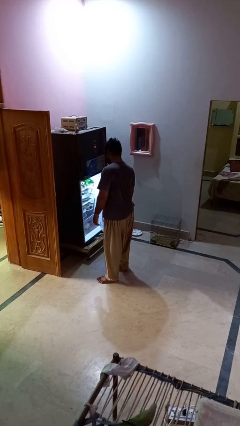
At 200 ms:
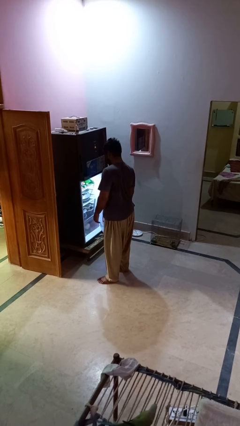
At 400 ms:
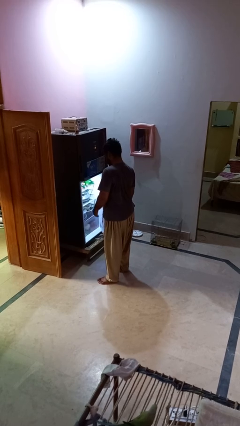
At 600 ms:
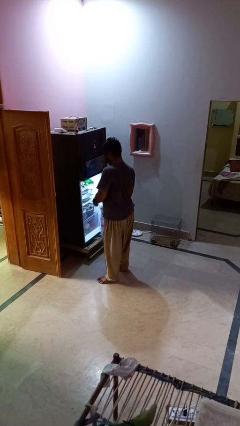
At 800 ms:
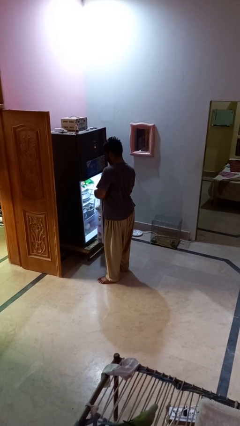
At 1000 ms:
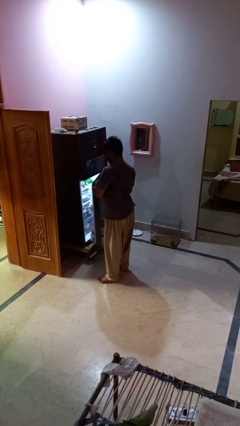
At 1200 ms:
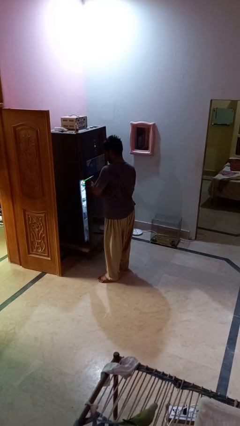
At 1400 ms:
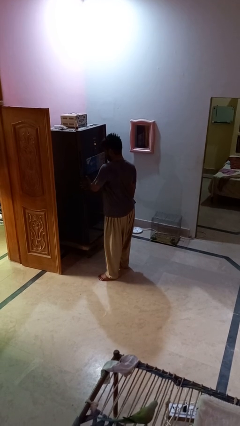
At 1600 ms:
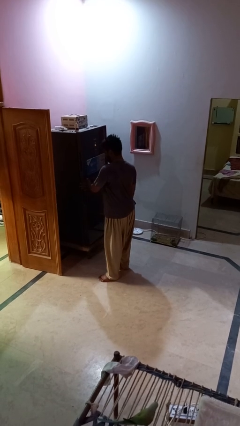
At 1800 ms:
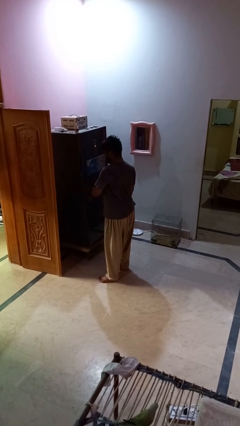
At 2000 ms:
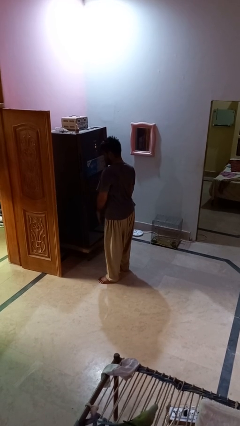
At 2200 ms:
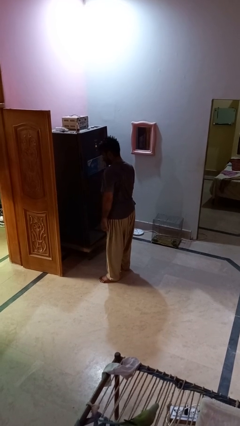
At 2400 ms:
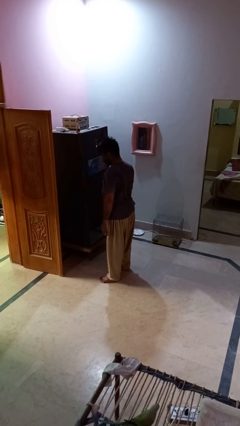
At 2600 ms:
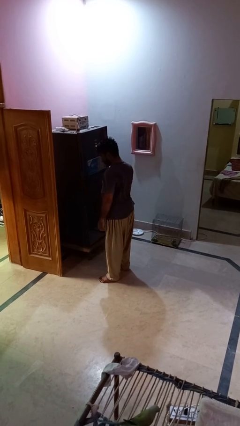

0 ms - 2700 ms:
person closes refrigerator

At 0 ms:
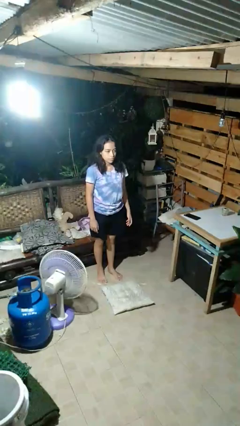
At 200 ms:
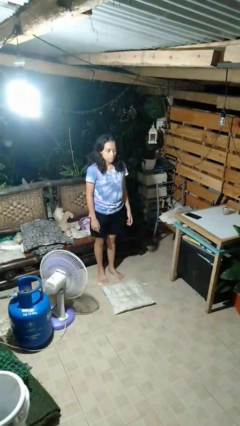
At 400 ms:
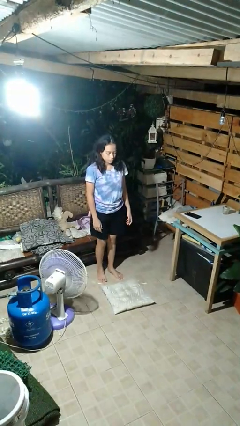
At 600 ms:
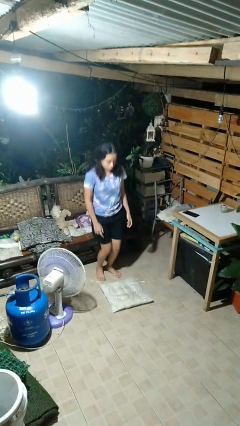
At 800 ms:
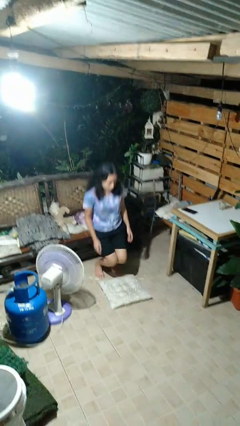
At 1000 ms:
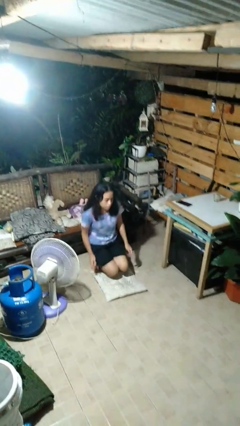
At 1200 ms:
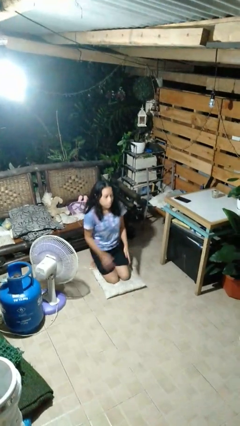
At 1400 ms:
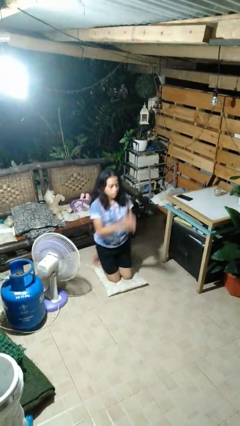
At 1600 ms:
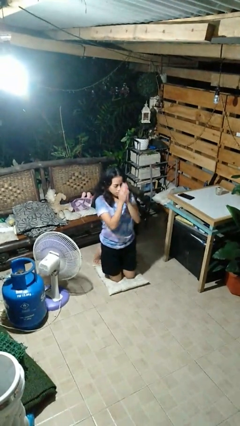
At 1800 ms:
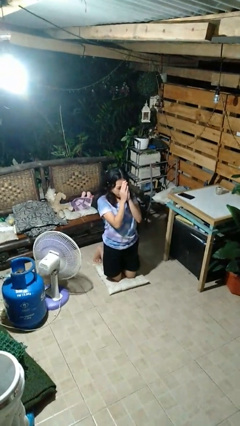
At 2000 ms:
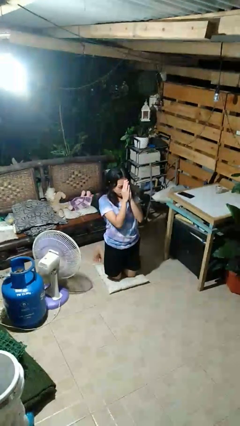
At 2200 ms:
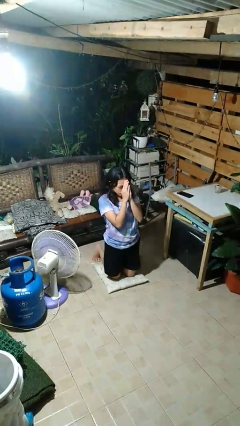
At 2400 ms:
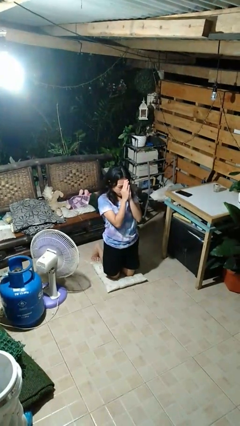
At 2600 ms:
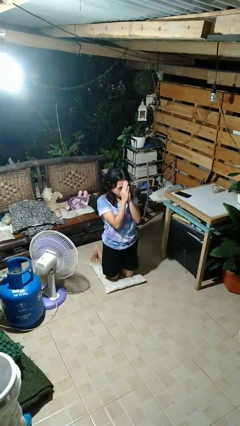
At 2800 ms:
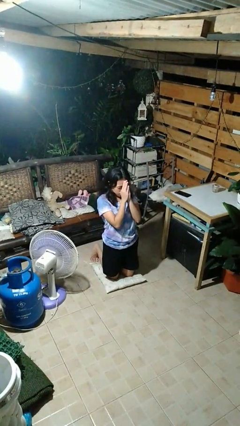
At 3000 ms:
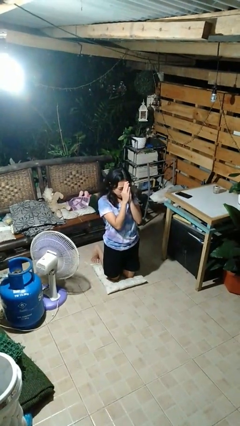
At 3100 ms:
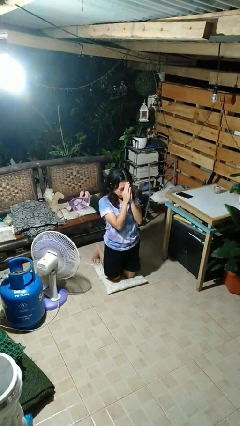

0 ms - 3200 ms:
person prays

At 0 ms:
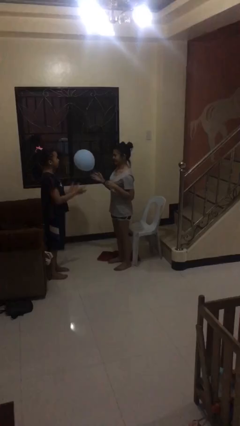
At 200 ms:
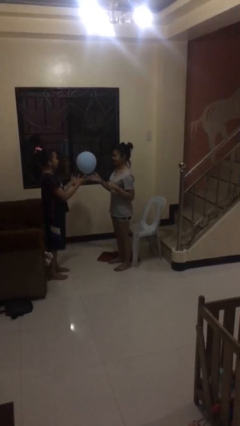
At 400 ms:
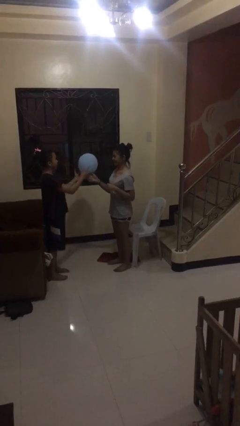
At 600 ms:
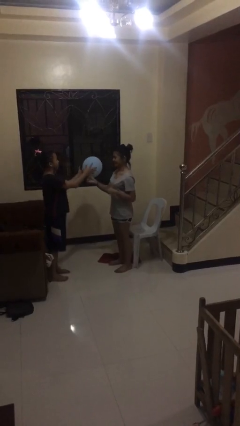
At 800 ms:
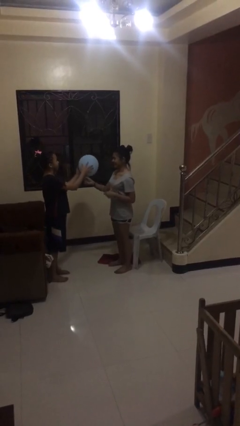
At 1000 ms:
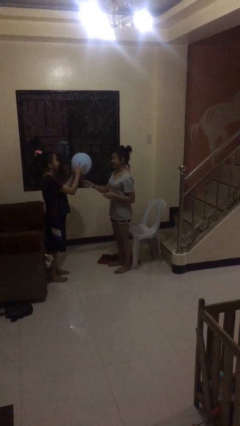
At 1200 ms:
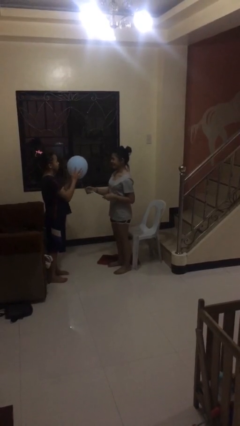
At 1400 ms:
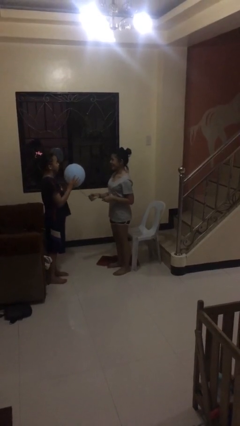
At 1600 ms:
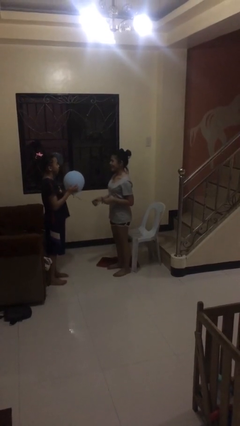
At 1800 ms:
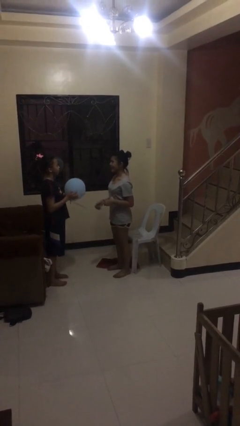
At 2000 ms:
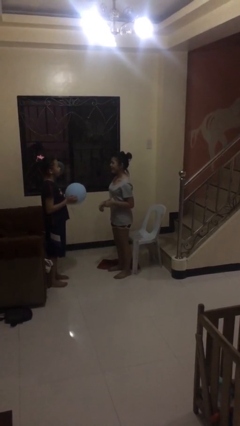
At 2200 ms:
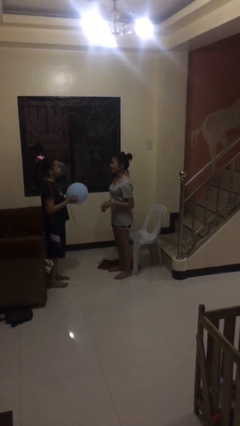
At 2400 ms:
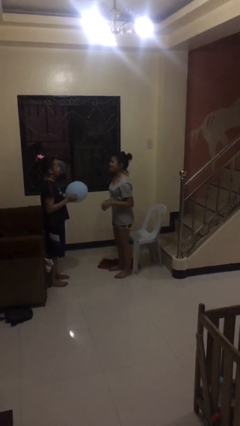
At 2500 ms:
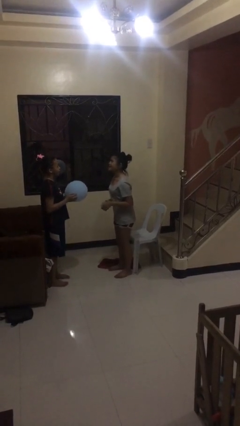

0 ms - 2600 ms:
person transfers object to person

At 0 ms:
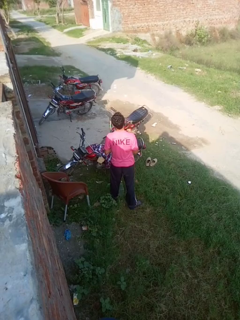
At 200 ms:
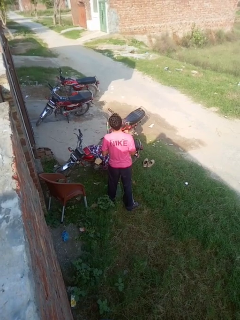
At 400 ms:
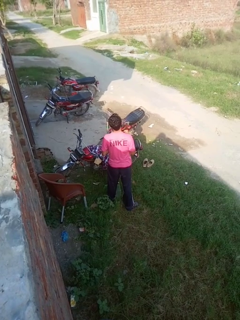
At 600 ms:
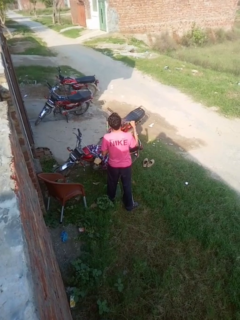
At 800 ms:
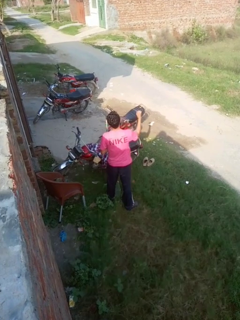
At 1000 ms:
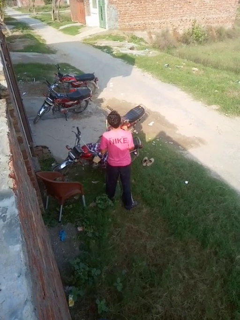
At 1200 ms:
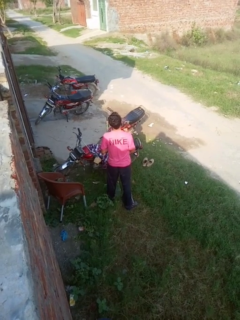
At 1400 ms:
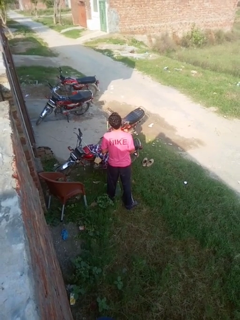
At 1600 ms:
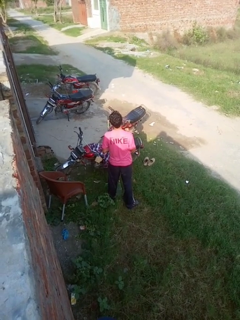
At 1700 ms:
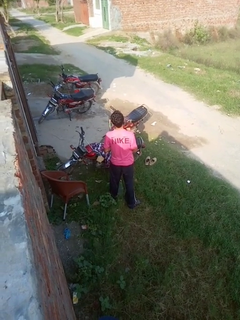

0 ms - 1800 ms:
person punches

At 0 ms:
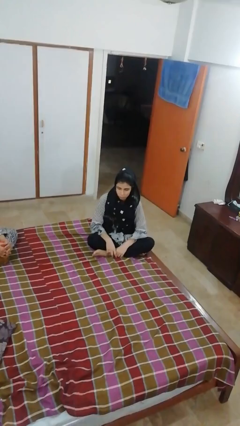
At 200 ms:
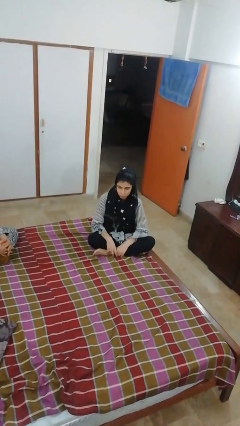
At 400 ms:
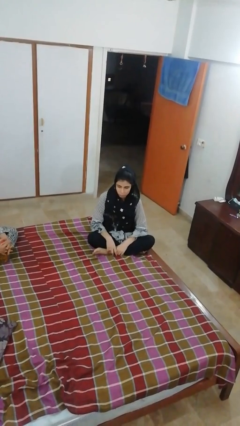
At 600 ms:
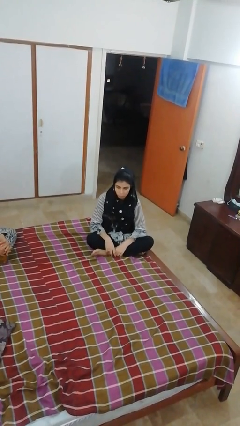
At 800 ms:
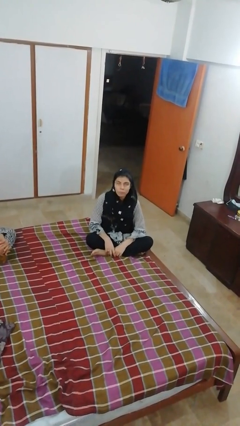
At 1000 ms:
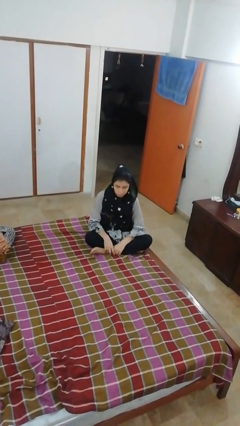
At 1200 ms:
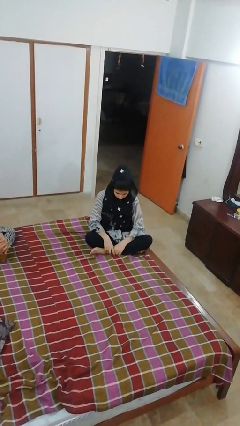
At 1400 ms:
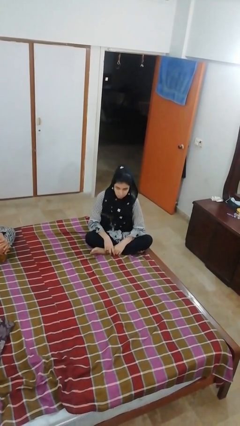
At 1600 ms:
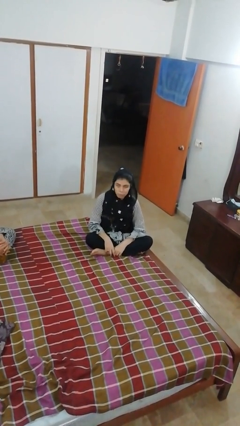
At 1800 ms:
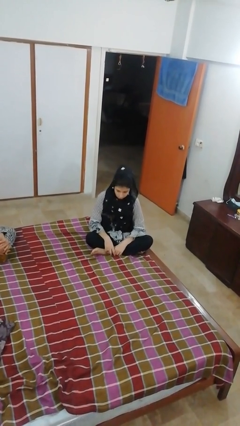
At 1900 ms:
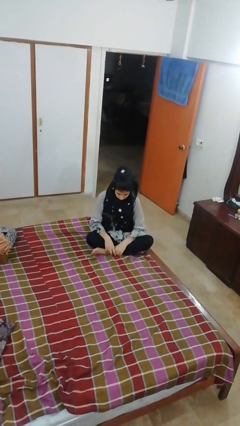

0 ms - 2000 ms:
person nods head

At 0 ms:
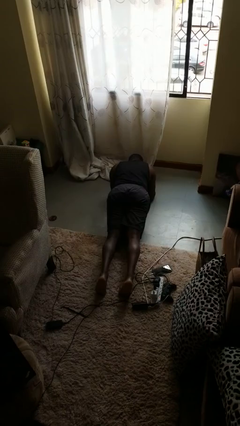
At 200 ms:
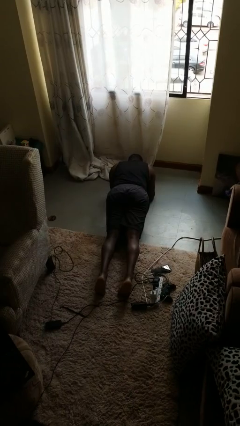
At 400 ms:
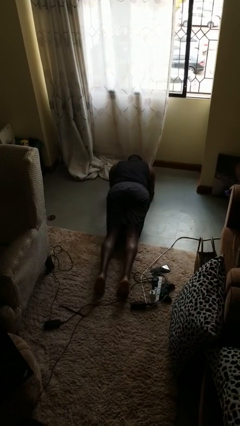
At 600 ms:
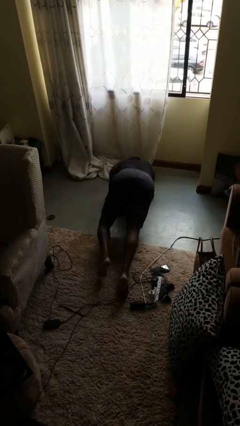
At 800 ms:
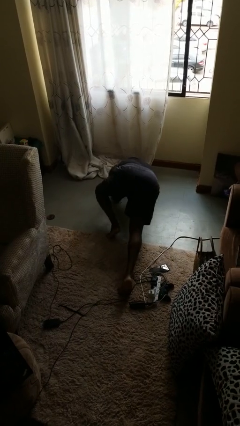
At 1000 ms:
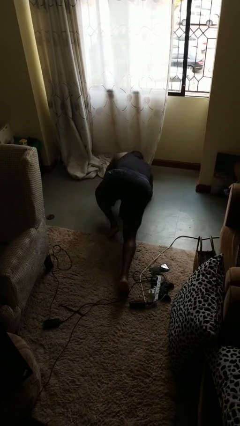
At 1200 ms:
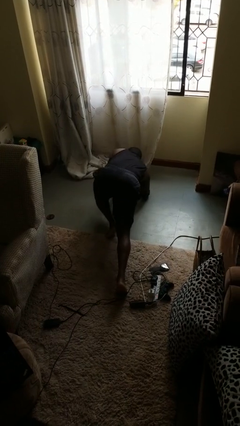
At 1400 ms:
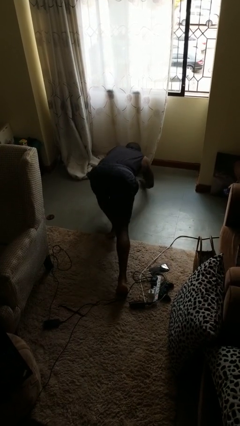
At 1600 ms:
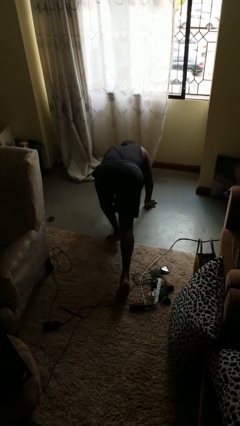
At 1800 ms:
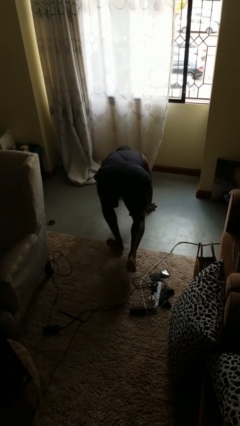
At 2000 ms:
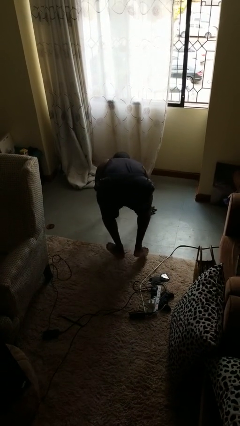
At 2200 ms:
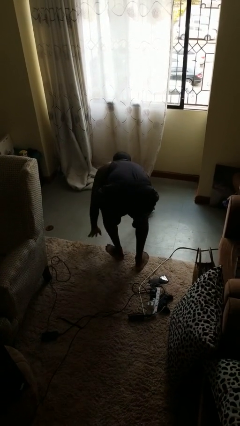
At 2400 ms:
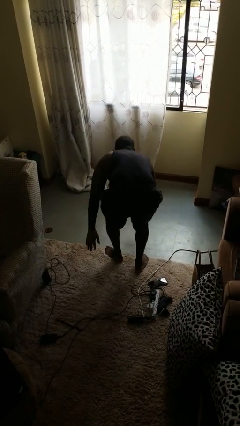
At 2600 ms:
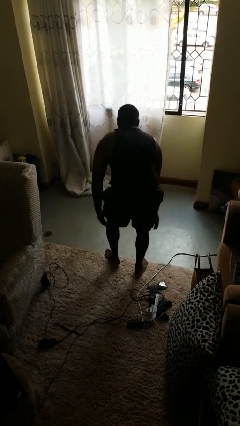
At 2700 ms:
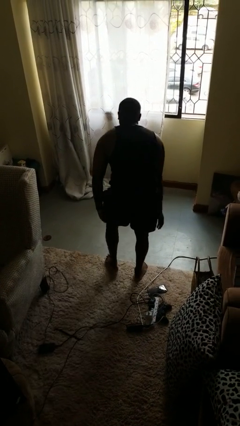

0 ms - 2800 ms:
person stands up from floor

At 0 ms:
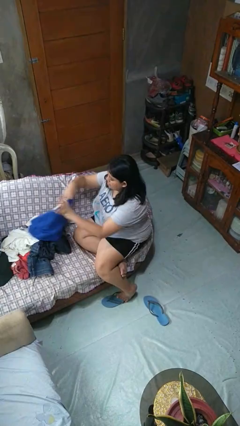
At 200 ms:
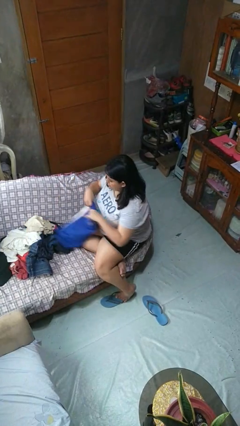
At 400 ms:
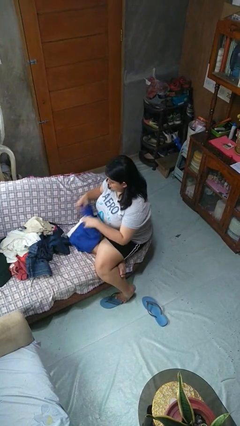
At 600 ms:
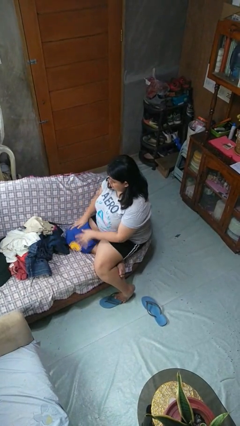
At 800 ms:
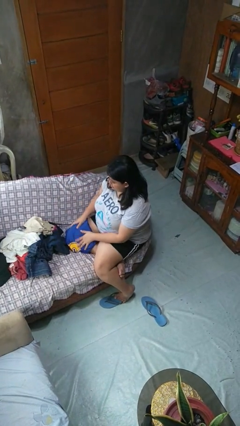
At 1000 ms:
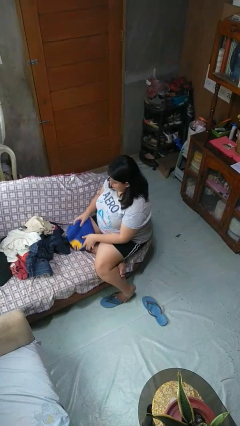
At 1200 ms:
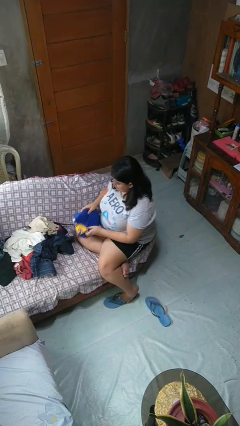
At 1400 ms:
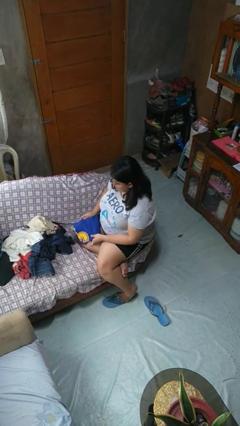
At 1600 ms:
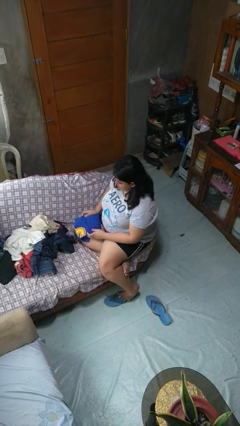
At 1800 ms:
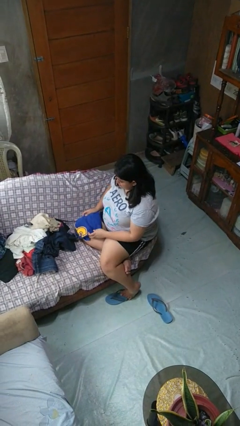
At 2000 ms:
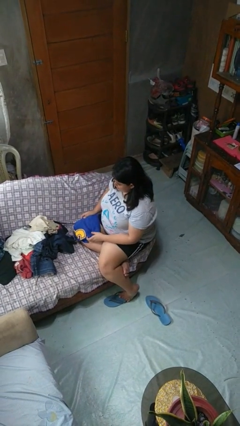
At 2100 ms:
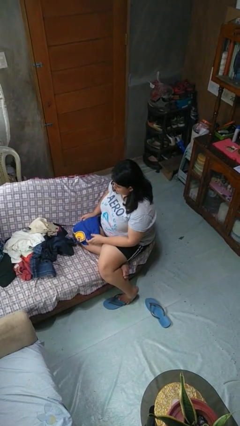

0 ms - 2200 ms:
person folds shirt

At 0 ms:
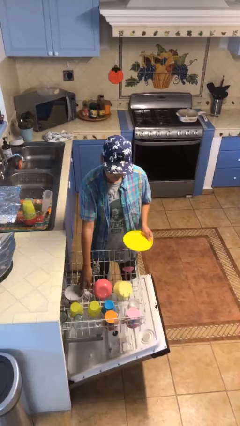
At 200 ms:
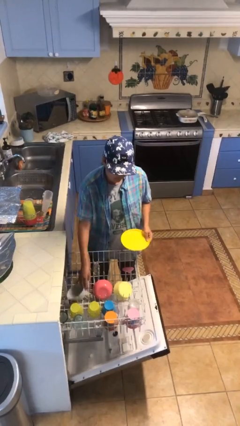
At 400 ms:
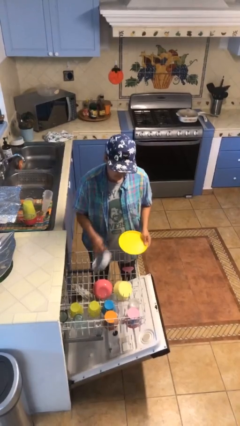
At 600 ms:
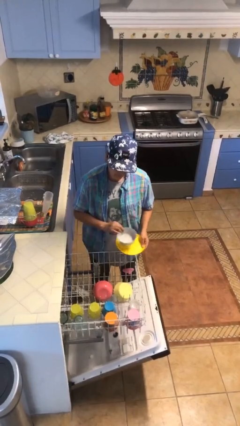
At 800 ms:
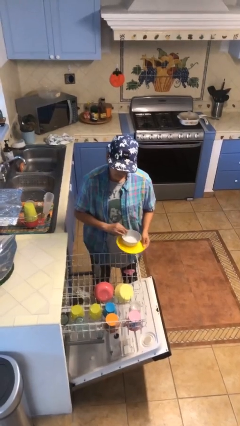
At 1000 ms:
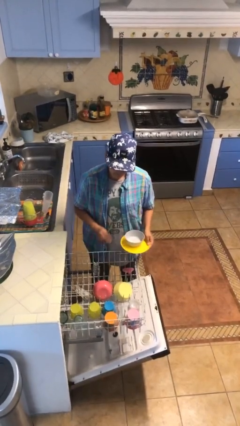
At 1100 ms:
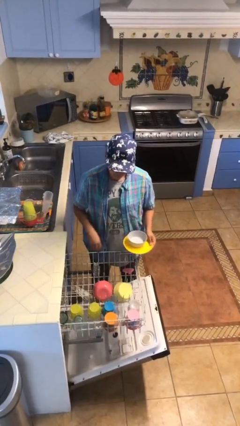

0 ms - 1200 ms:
person unloads dishwasher
